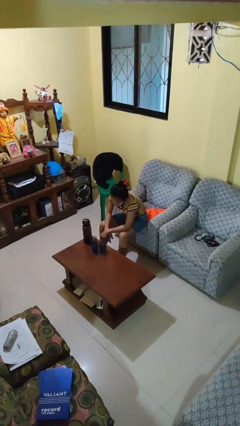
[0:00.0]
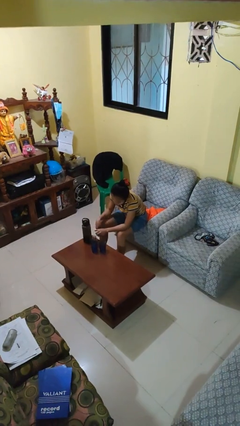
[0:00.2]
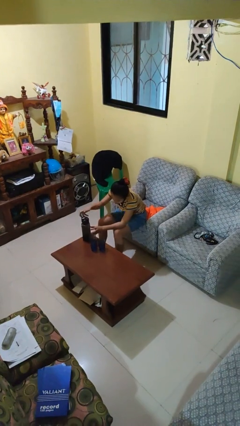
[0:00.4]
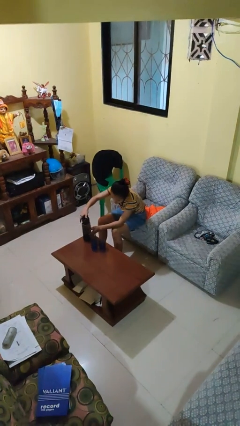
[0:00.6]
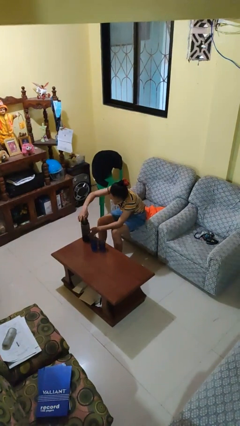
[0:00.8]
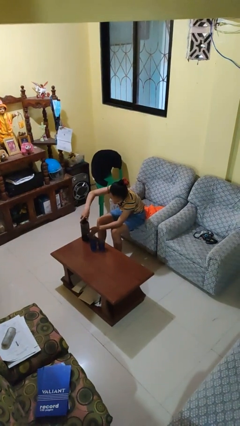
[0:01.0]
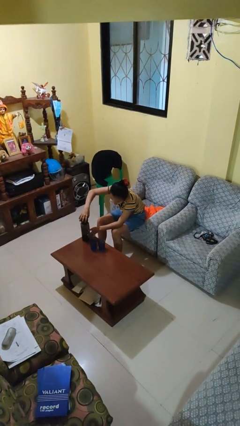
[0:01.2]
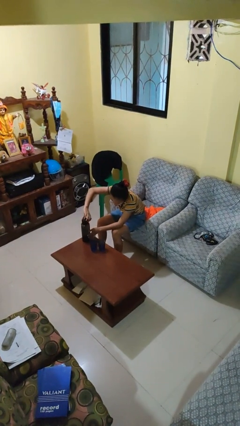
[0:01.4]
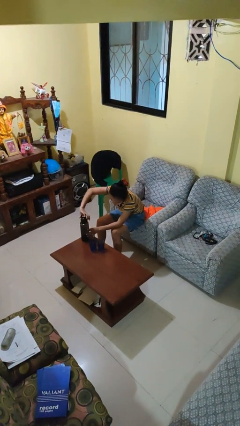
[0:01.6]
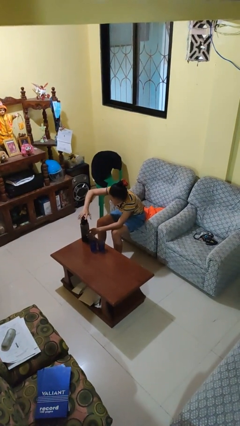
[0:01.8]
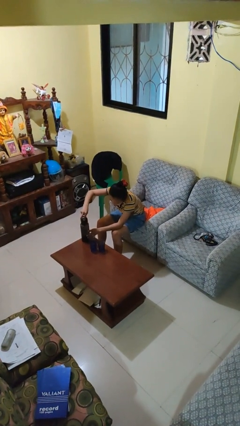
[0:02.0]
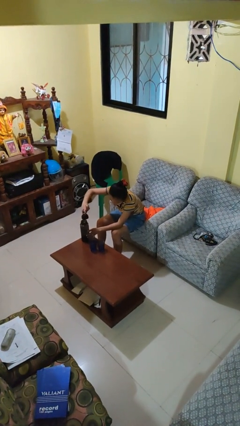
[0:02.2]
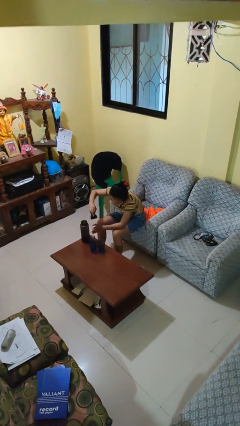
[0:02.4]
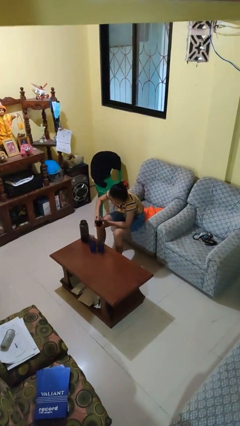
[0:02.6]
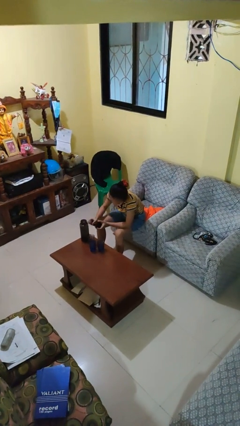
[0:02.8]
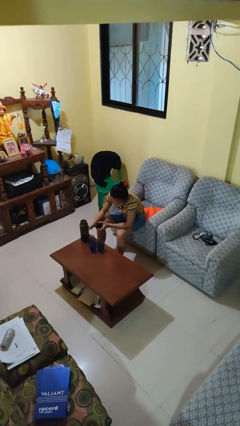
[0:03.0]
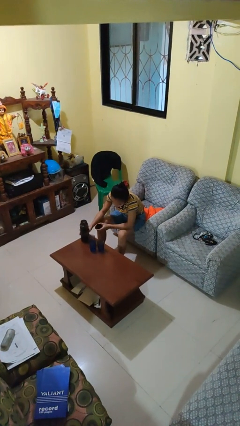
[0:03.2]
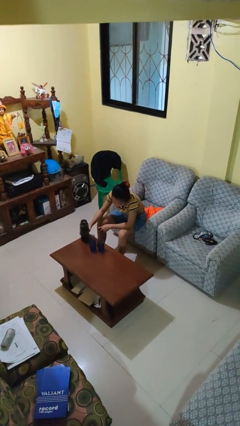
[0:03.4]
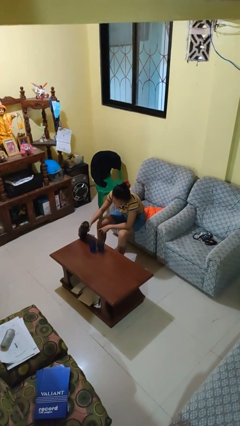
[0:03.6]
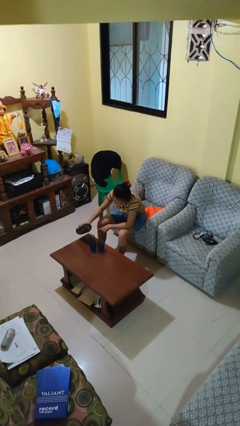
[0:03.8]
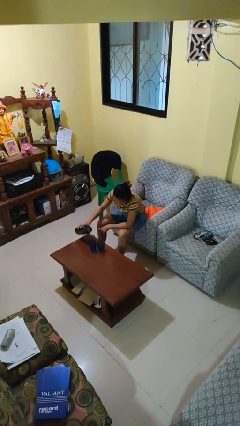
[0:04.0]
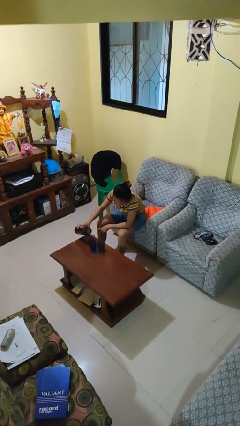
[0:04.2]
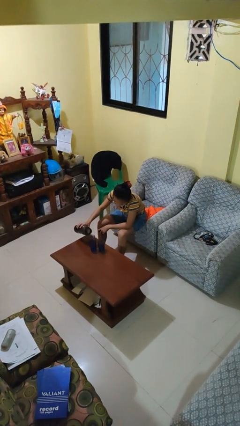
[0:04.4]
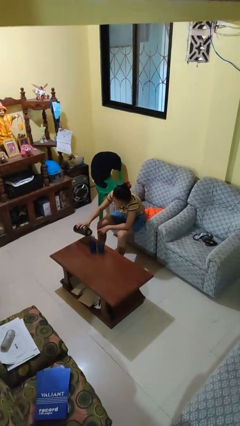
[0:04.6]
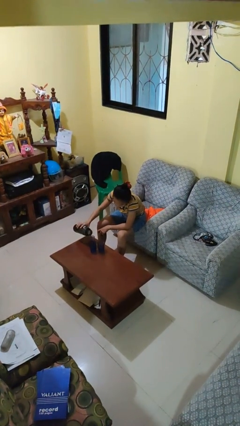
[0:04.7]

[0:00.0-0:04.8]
person unscrews lid from bottle

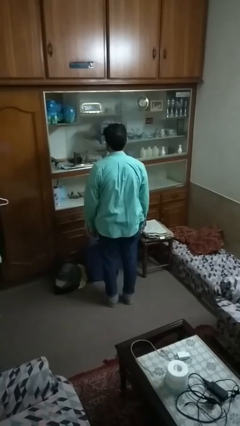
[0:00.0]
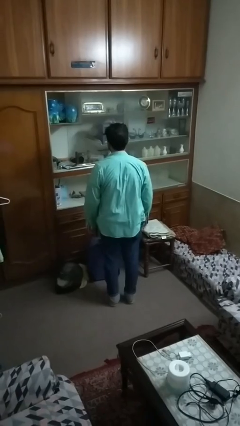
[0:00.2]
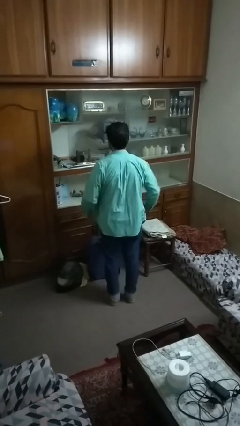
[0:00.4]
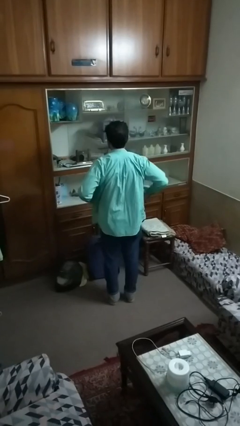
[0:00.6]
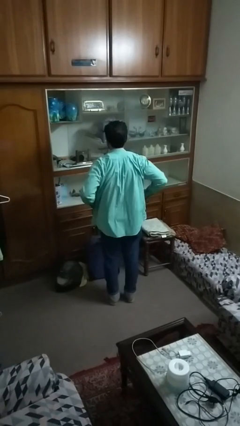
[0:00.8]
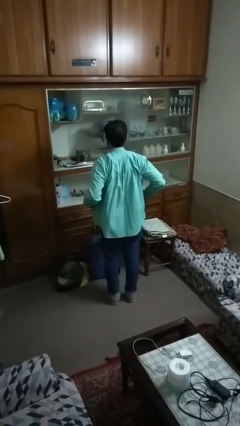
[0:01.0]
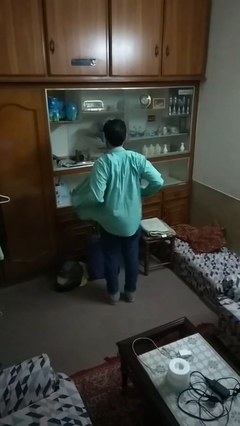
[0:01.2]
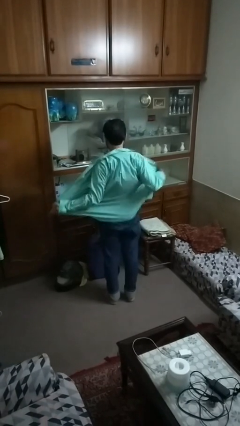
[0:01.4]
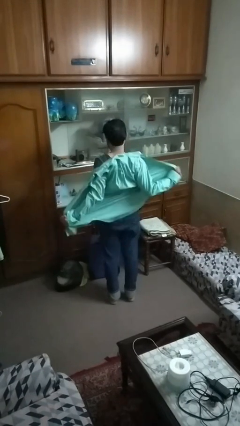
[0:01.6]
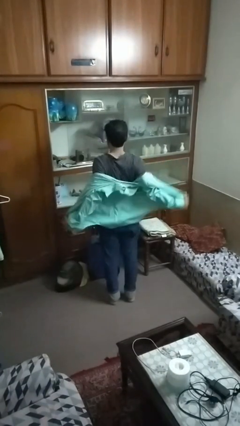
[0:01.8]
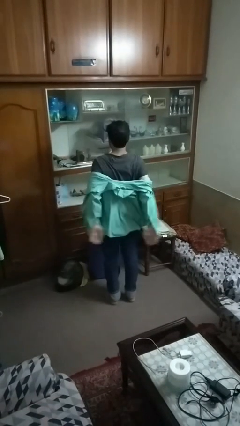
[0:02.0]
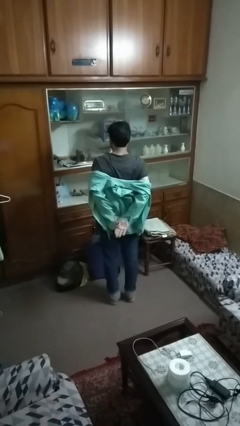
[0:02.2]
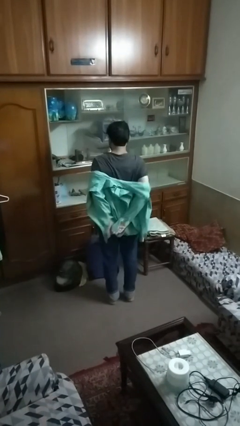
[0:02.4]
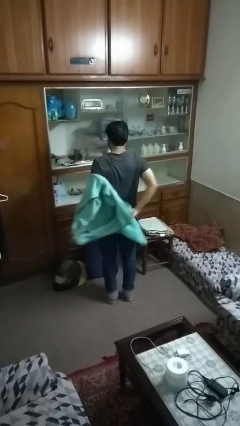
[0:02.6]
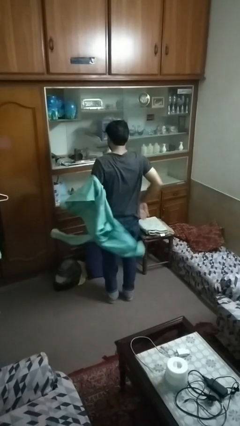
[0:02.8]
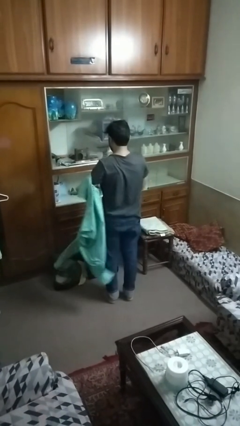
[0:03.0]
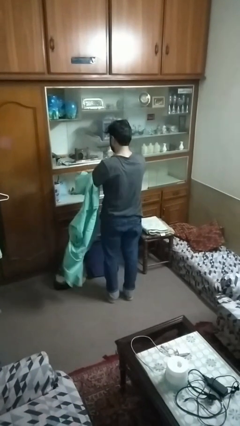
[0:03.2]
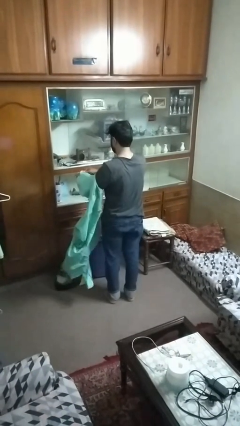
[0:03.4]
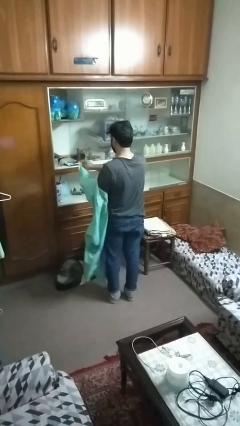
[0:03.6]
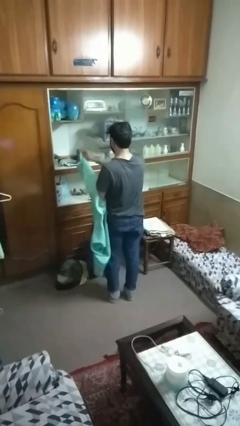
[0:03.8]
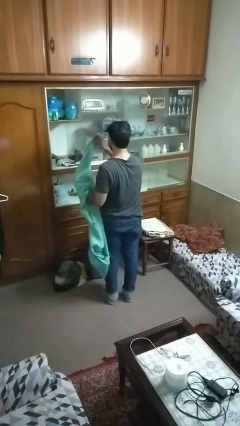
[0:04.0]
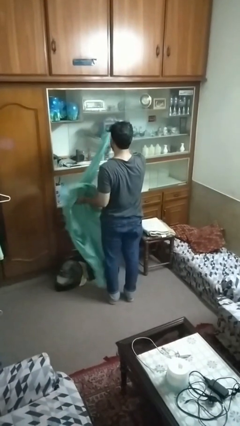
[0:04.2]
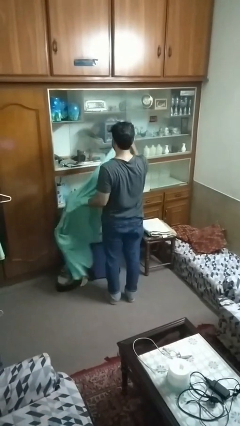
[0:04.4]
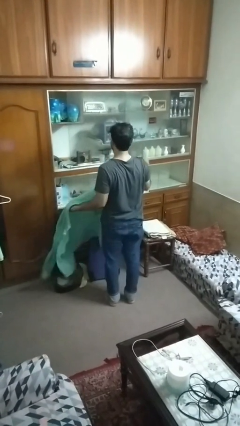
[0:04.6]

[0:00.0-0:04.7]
person takes off shirt

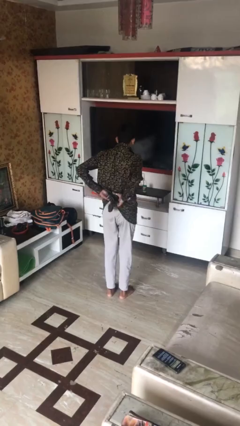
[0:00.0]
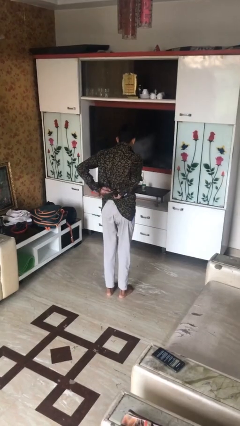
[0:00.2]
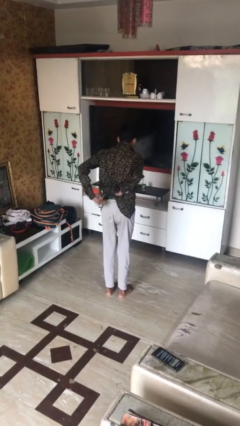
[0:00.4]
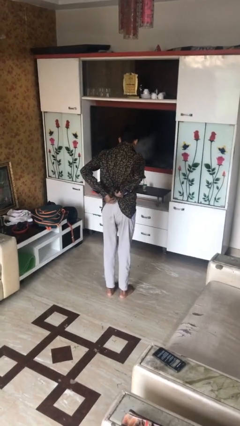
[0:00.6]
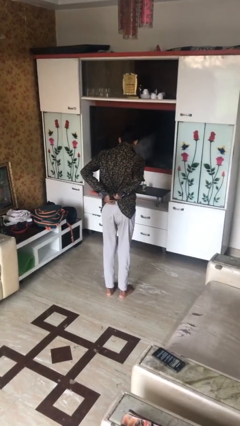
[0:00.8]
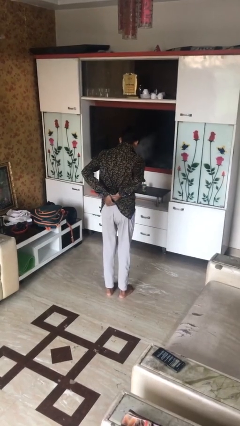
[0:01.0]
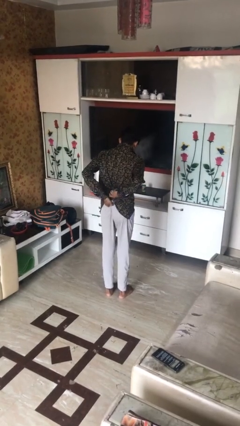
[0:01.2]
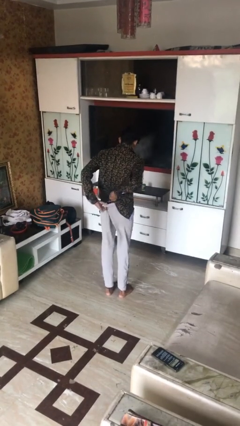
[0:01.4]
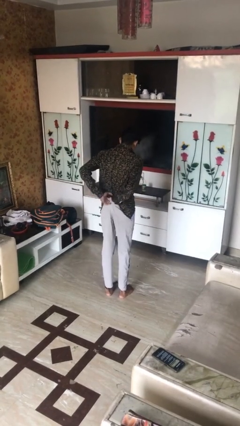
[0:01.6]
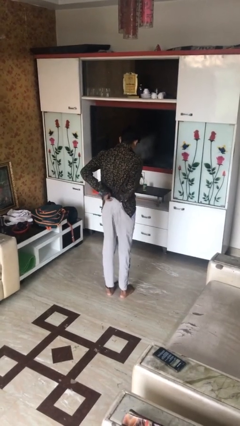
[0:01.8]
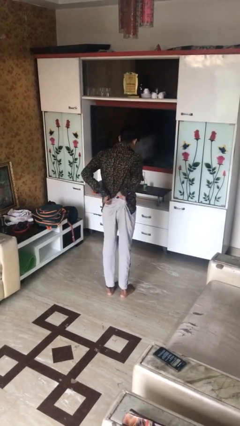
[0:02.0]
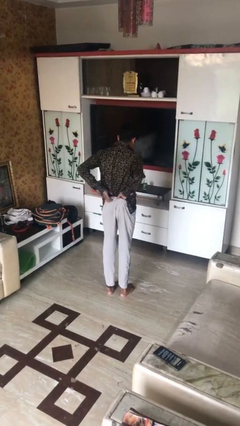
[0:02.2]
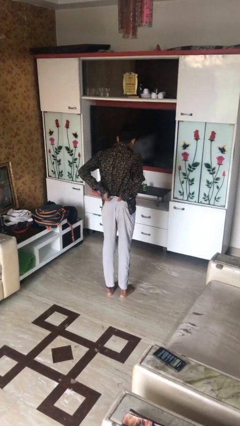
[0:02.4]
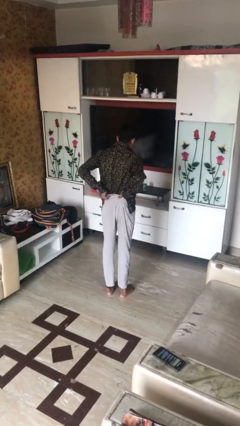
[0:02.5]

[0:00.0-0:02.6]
person tucks in shirt

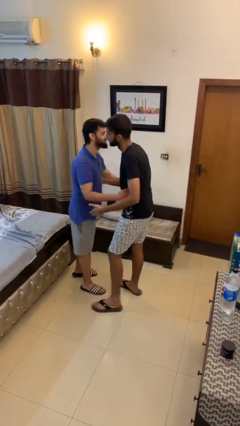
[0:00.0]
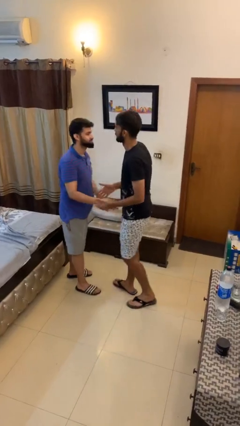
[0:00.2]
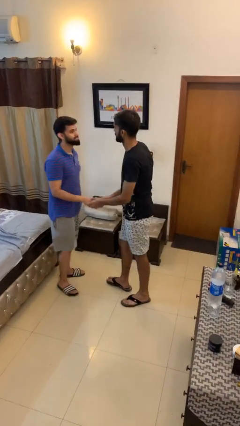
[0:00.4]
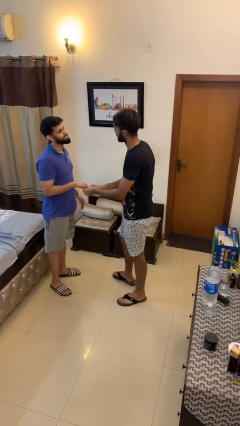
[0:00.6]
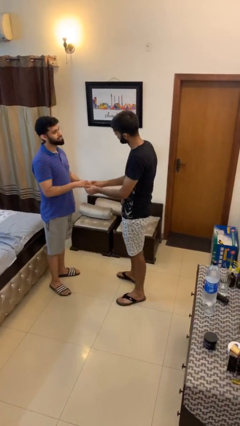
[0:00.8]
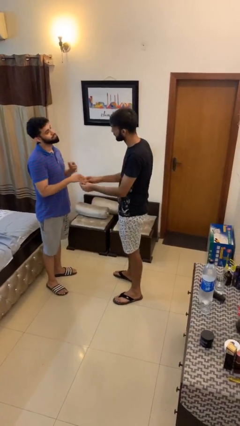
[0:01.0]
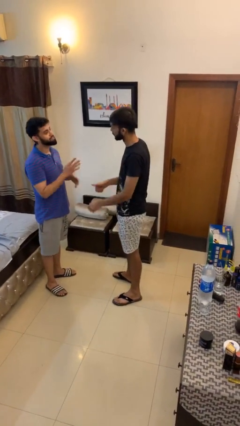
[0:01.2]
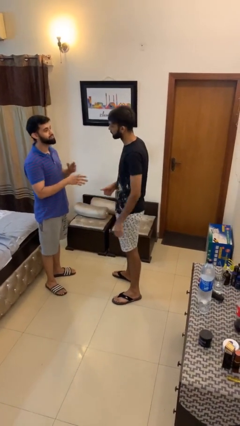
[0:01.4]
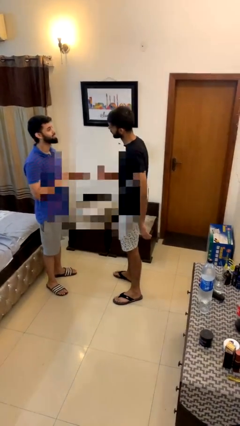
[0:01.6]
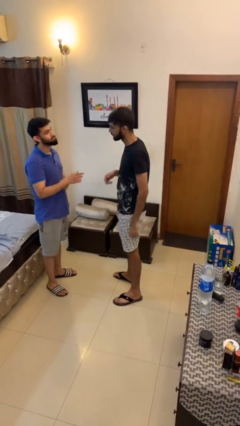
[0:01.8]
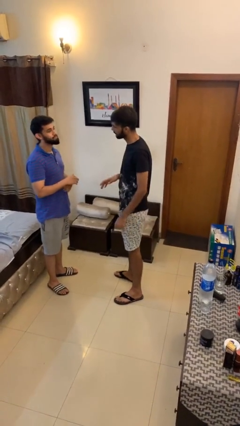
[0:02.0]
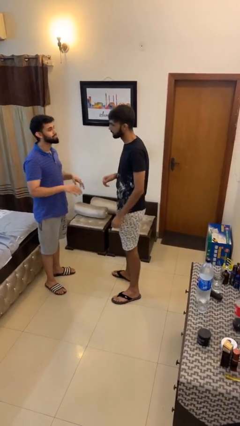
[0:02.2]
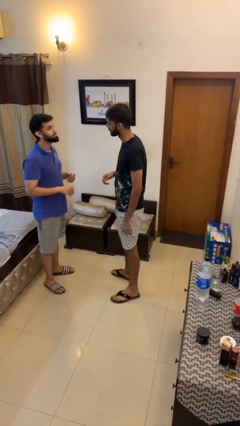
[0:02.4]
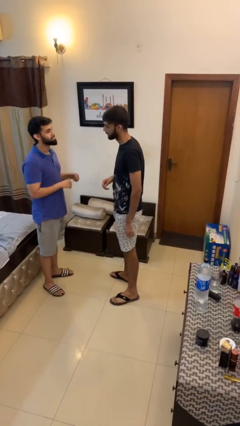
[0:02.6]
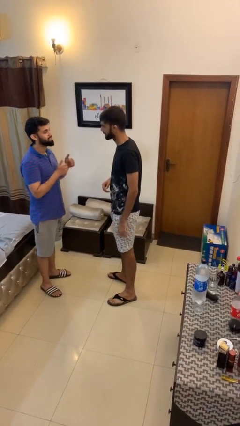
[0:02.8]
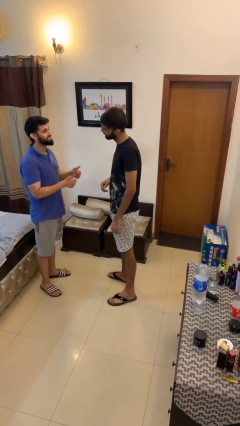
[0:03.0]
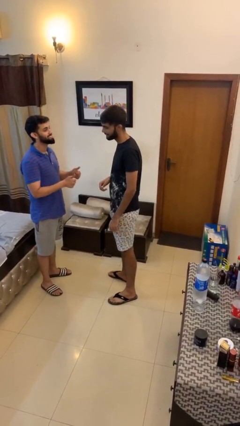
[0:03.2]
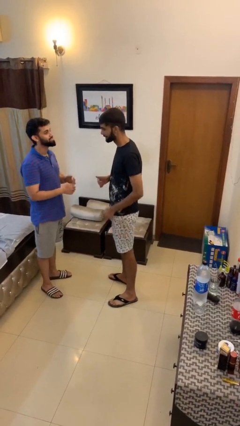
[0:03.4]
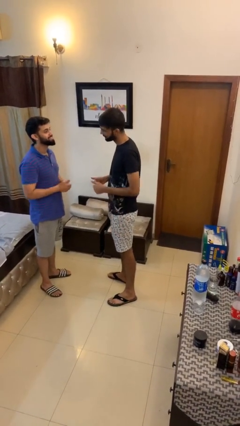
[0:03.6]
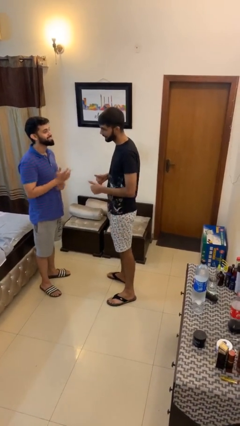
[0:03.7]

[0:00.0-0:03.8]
person talks to person

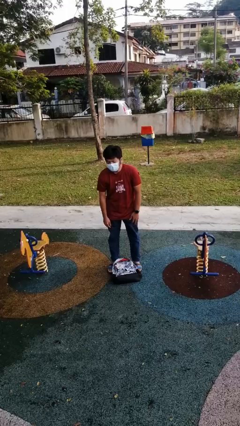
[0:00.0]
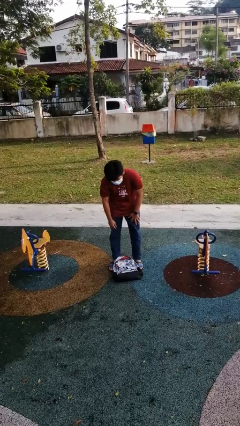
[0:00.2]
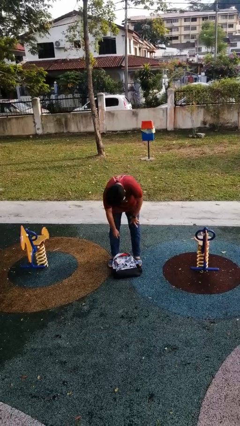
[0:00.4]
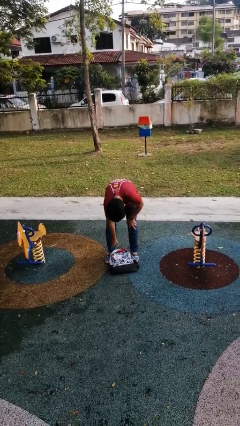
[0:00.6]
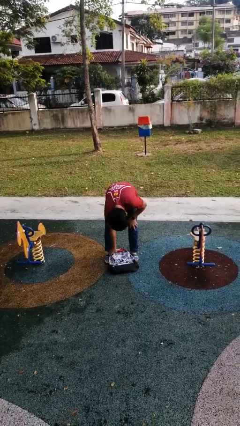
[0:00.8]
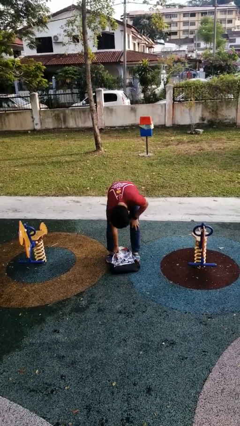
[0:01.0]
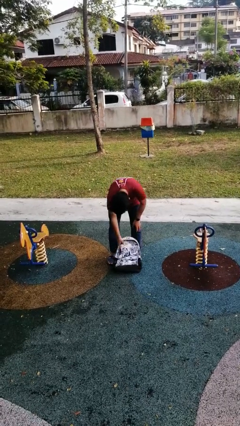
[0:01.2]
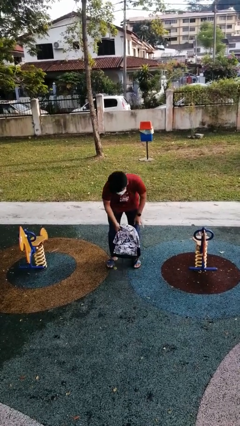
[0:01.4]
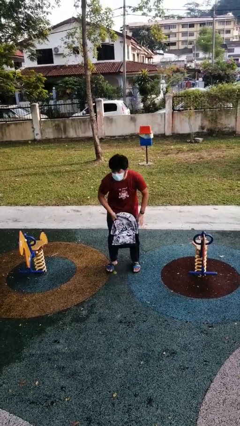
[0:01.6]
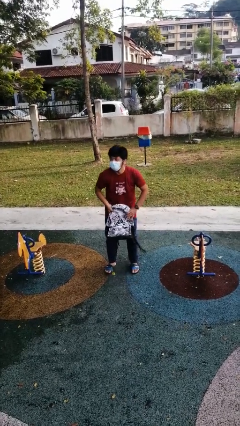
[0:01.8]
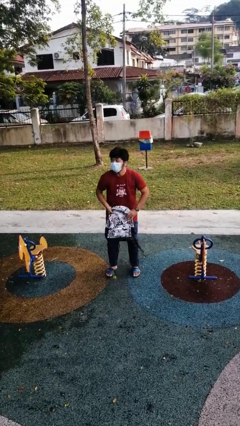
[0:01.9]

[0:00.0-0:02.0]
person picks up object from floor
